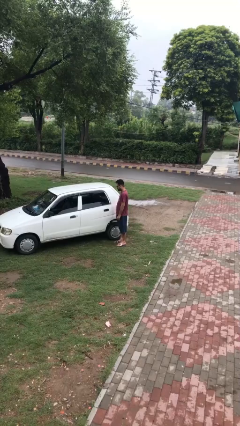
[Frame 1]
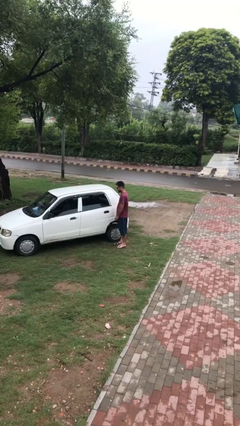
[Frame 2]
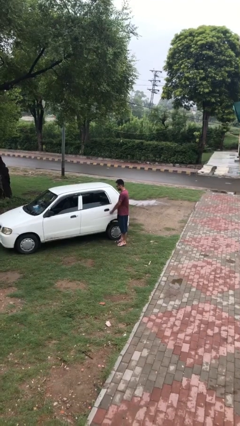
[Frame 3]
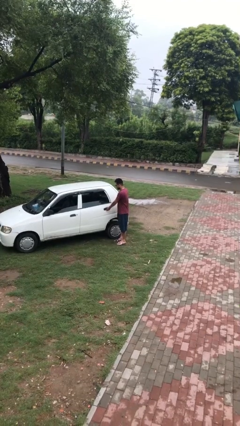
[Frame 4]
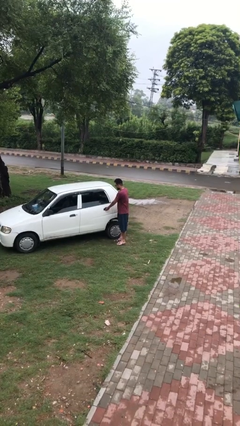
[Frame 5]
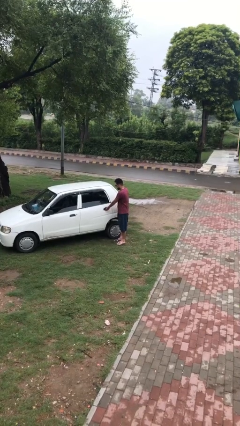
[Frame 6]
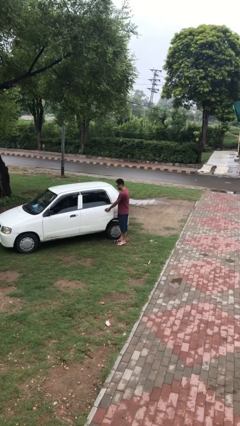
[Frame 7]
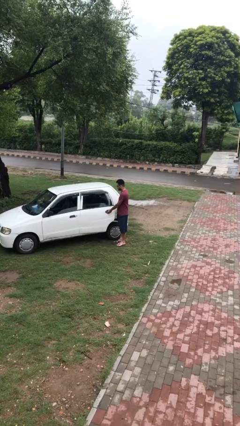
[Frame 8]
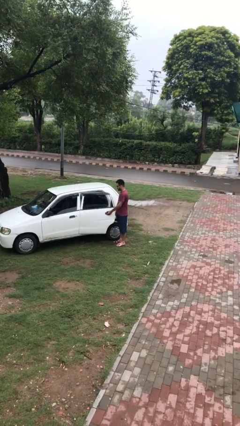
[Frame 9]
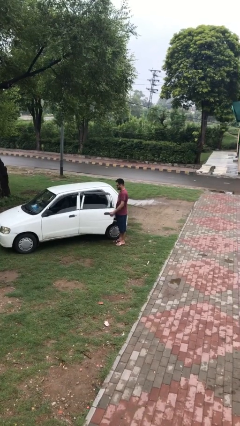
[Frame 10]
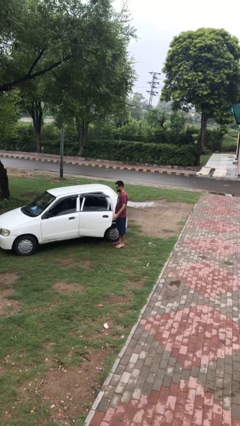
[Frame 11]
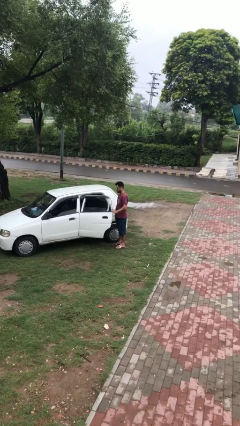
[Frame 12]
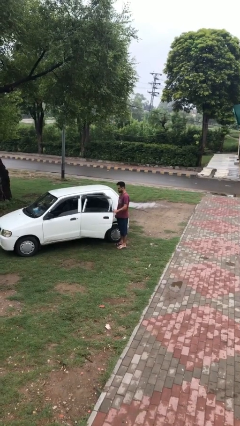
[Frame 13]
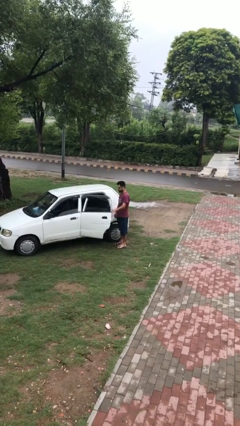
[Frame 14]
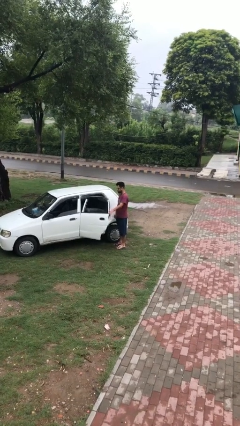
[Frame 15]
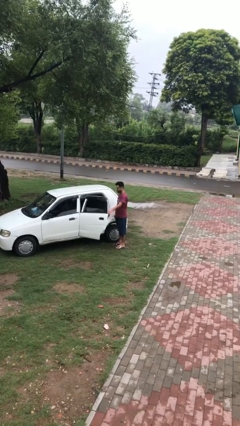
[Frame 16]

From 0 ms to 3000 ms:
person opens car door

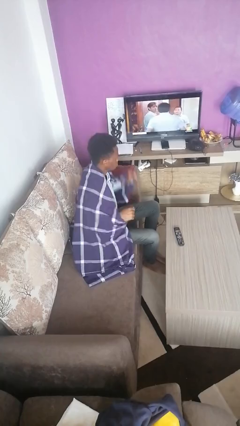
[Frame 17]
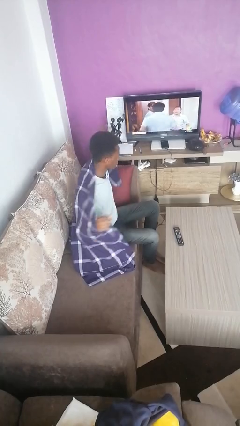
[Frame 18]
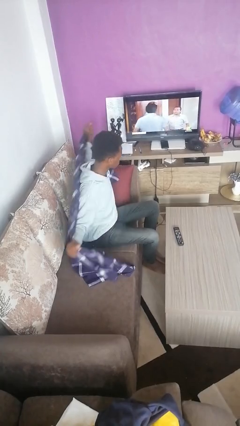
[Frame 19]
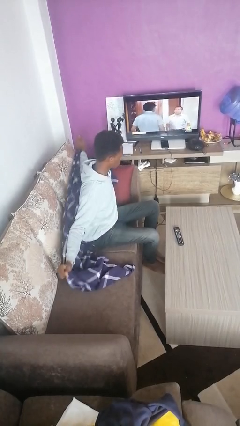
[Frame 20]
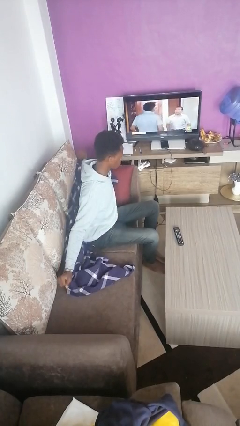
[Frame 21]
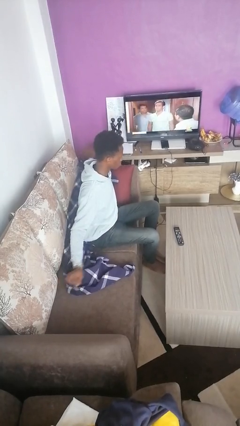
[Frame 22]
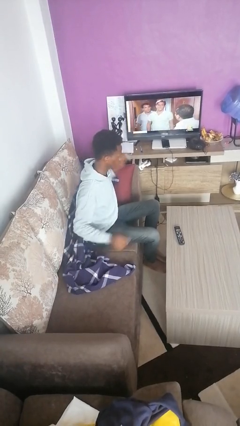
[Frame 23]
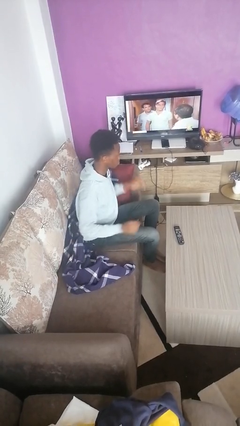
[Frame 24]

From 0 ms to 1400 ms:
person uncovers with blanket

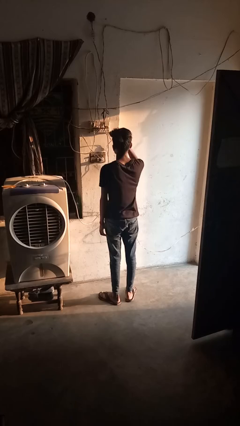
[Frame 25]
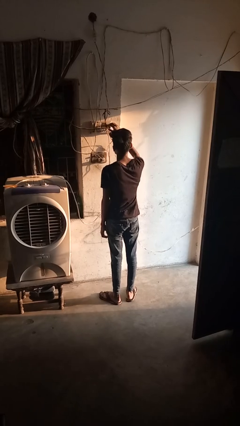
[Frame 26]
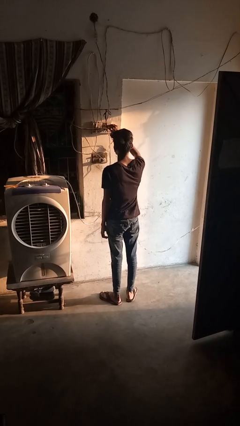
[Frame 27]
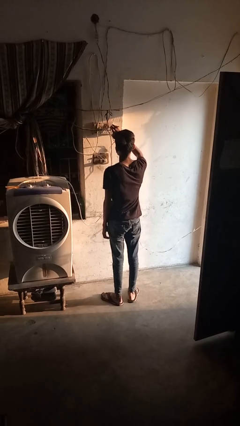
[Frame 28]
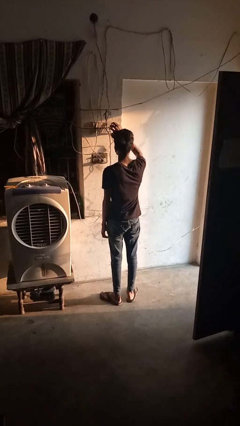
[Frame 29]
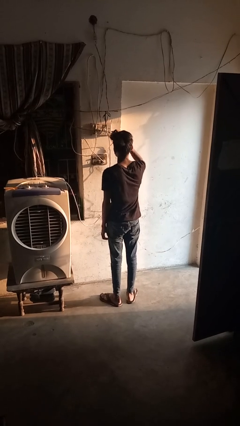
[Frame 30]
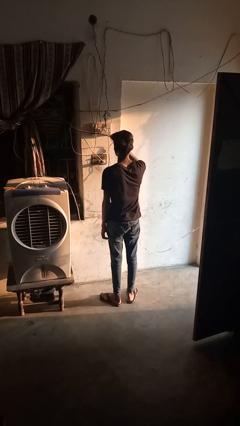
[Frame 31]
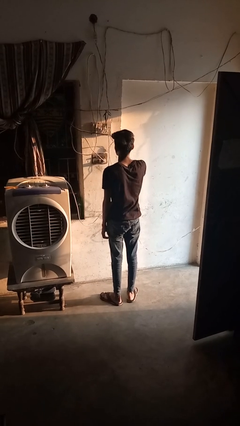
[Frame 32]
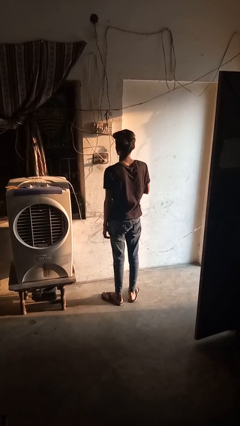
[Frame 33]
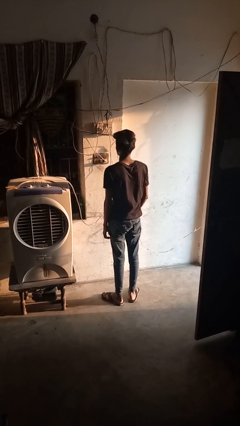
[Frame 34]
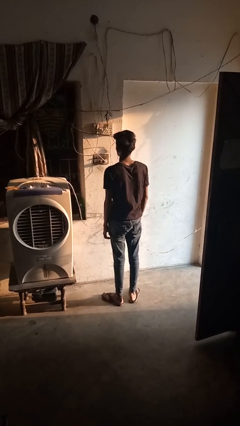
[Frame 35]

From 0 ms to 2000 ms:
person plugs into electrical socket

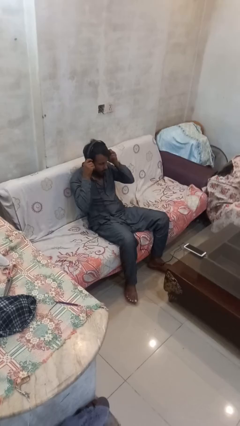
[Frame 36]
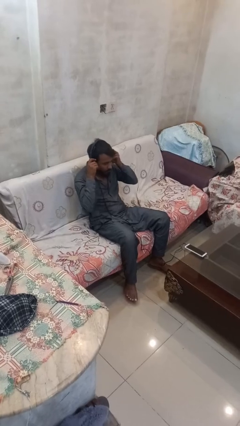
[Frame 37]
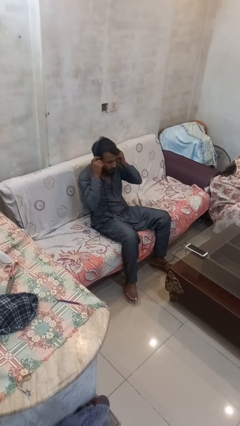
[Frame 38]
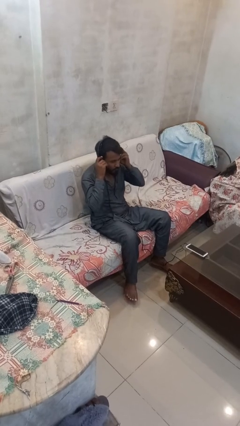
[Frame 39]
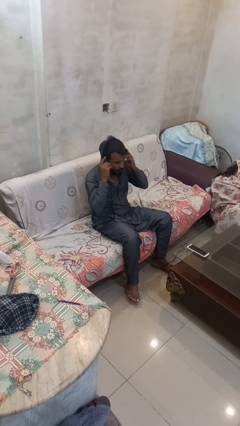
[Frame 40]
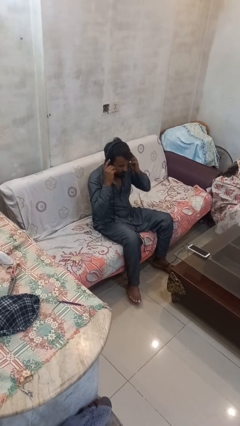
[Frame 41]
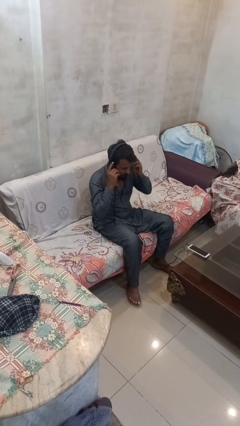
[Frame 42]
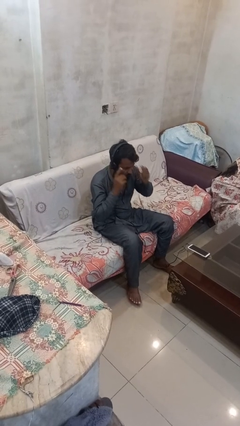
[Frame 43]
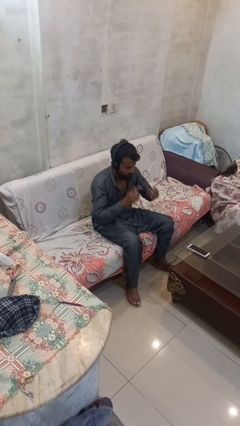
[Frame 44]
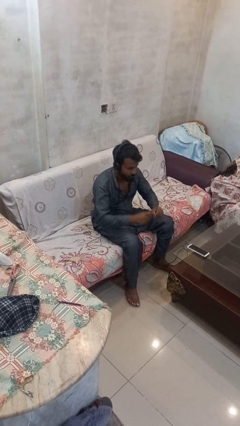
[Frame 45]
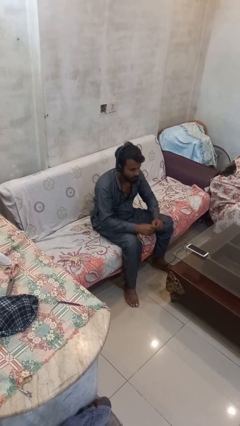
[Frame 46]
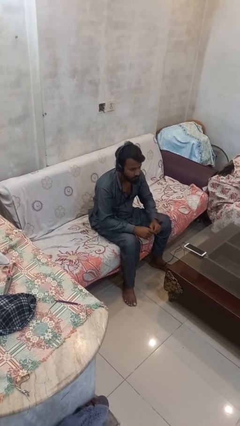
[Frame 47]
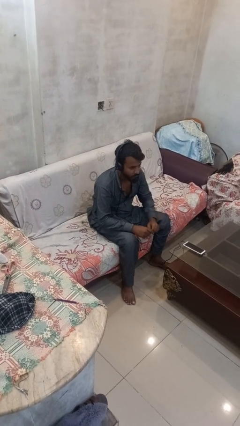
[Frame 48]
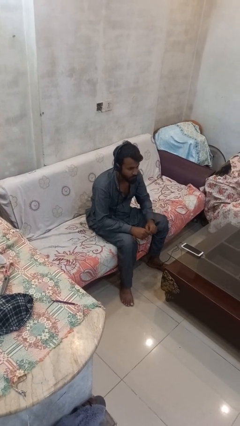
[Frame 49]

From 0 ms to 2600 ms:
person puts on headphones

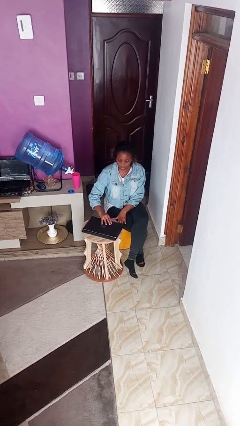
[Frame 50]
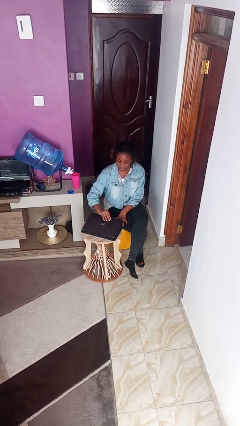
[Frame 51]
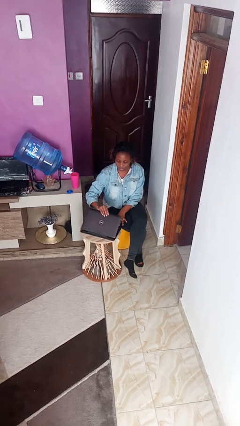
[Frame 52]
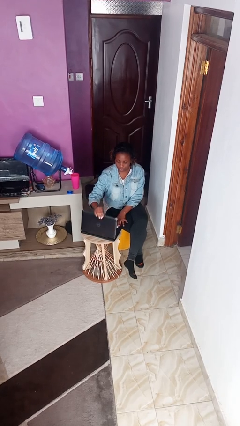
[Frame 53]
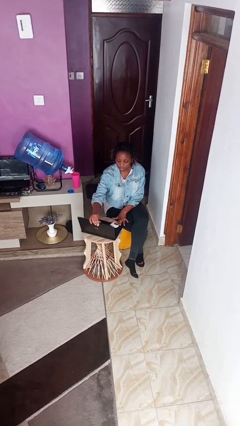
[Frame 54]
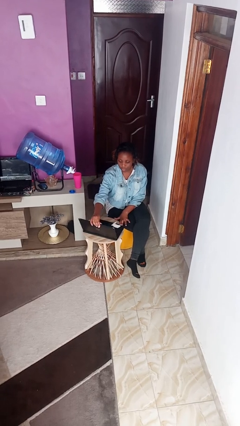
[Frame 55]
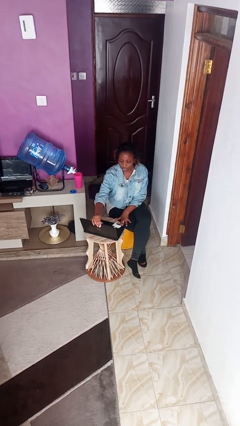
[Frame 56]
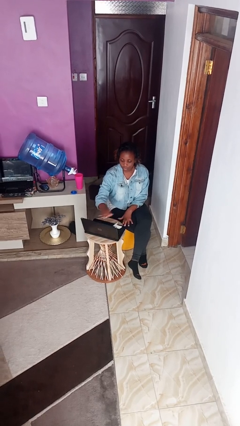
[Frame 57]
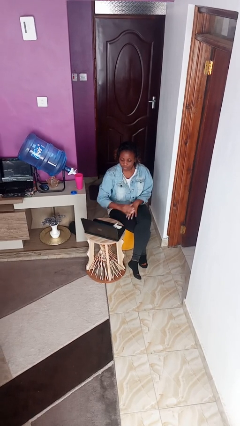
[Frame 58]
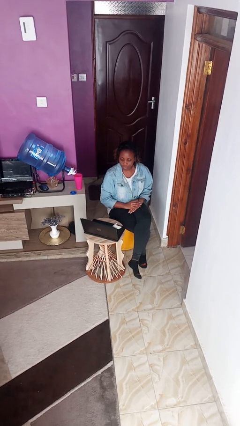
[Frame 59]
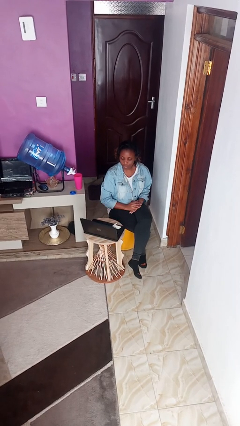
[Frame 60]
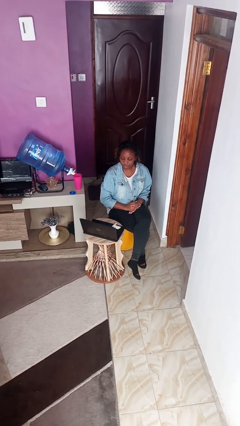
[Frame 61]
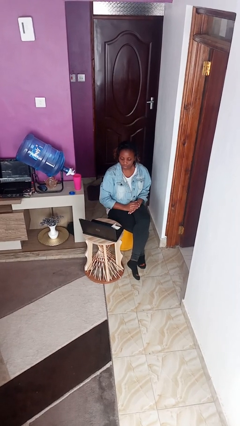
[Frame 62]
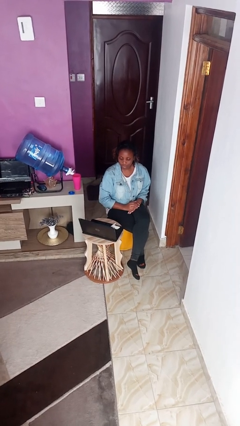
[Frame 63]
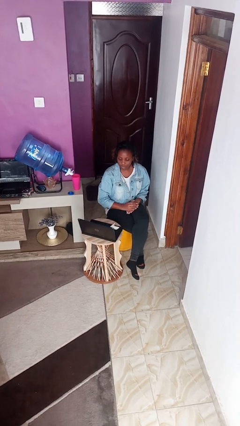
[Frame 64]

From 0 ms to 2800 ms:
person opens laptop

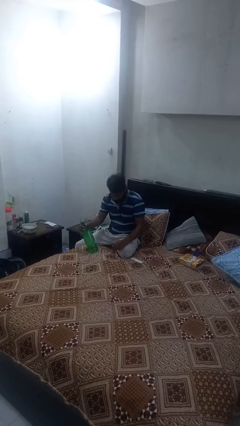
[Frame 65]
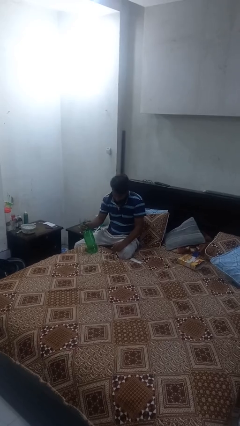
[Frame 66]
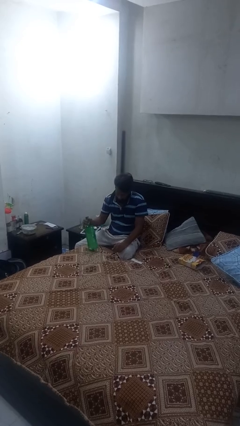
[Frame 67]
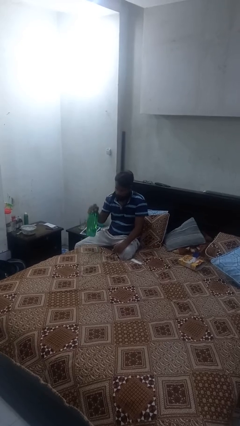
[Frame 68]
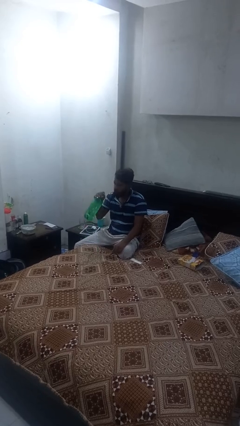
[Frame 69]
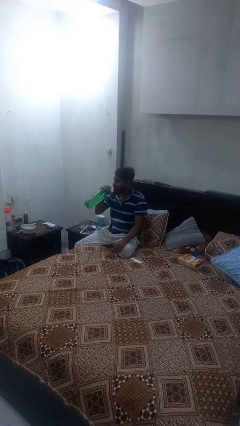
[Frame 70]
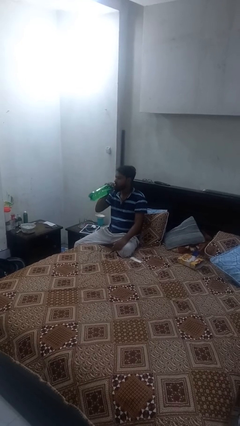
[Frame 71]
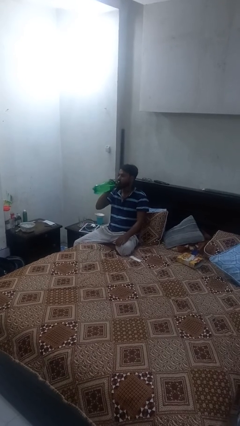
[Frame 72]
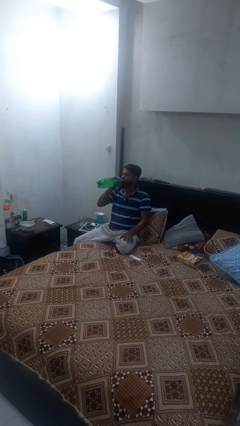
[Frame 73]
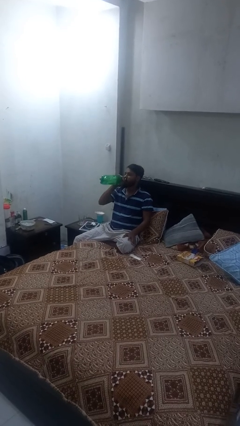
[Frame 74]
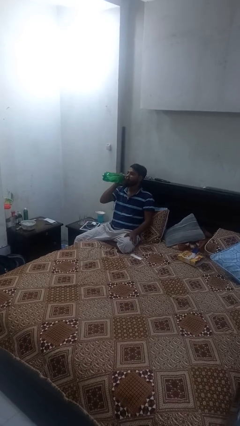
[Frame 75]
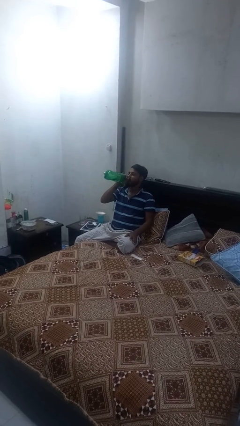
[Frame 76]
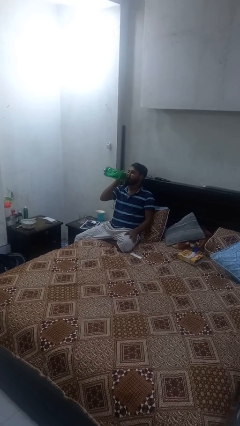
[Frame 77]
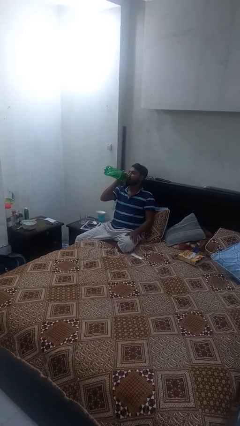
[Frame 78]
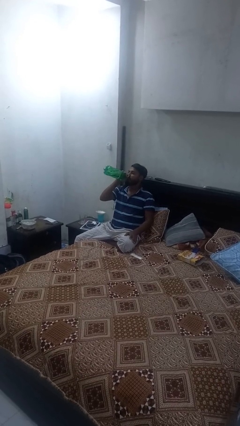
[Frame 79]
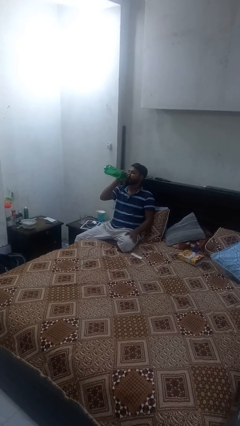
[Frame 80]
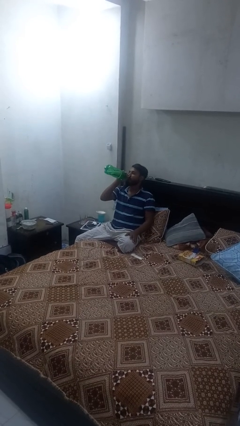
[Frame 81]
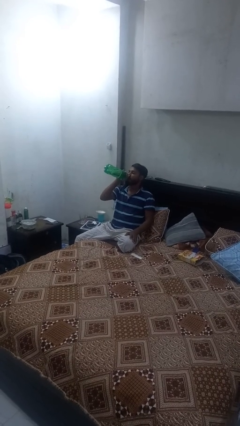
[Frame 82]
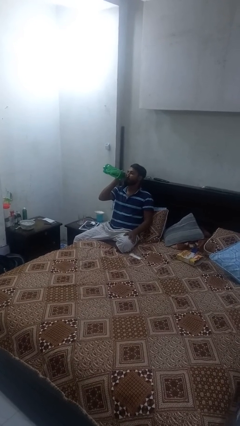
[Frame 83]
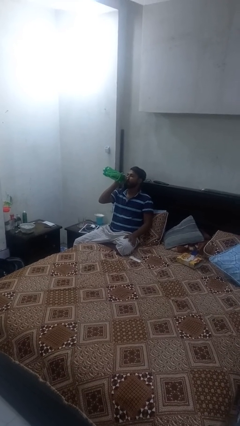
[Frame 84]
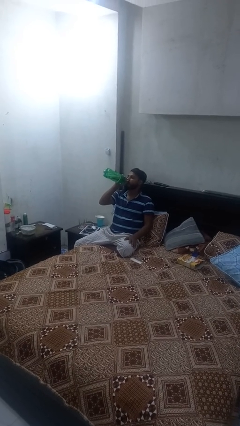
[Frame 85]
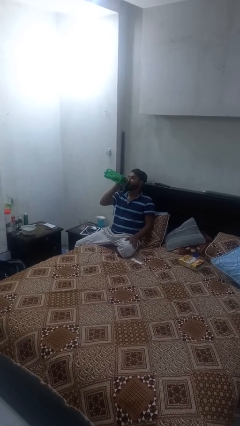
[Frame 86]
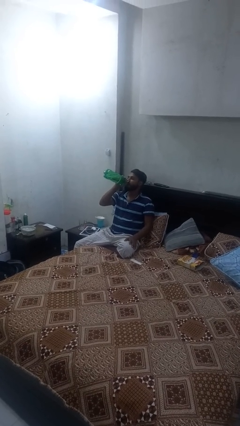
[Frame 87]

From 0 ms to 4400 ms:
person drinks from bottle

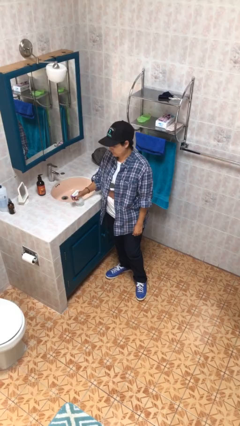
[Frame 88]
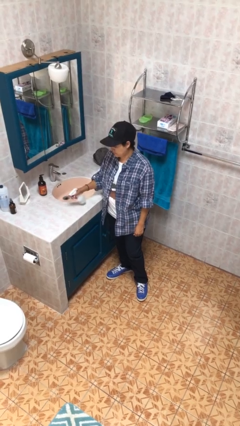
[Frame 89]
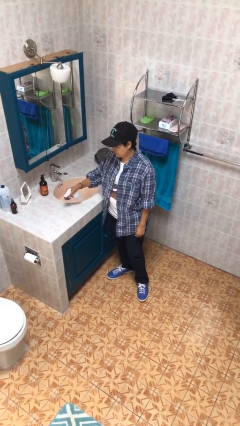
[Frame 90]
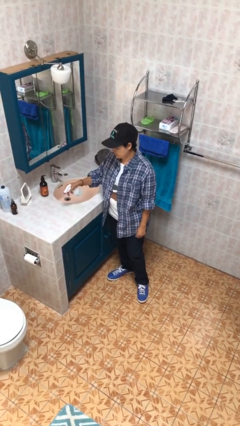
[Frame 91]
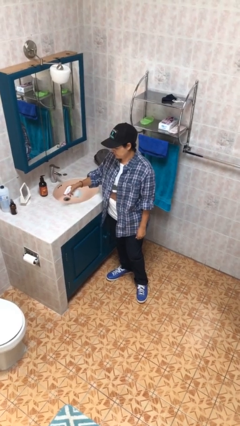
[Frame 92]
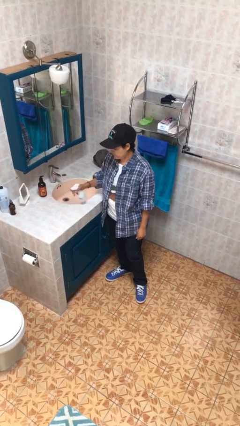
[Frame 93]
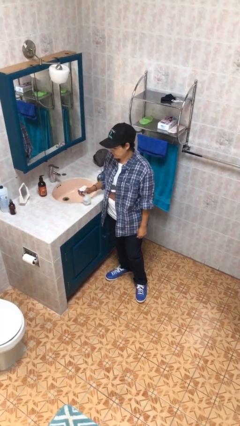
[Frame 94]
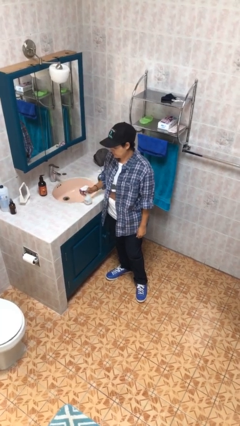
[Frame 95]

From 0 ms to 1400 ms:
person sprays from bottle
